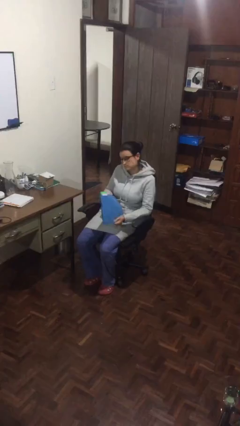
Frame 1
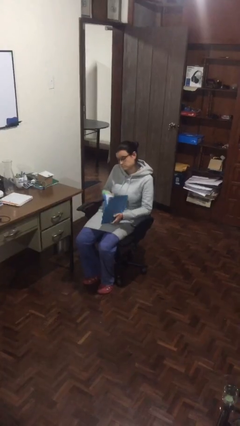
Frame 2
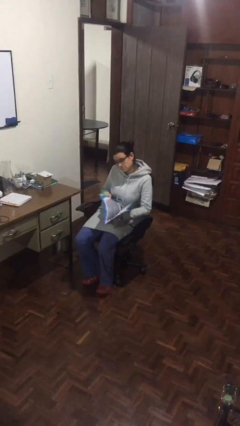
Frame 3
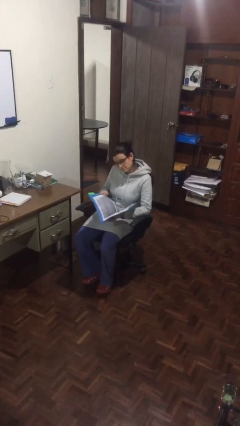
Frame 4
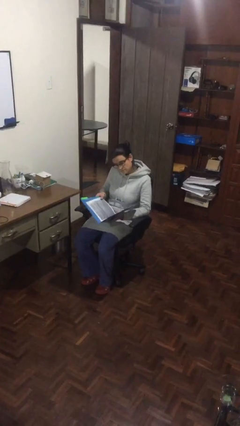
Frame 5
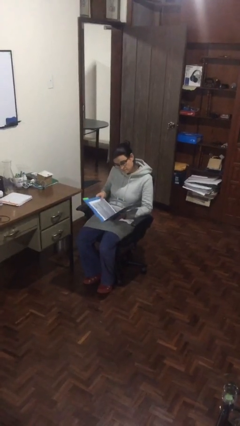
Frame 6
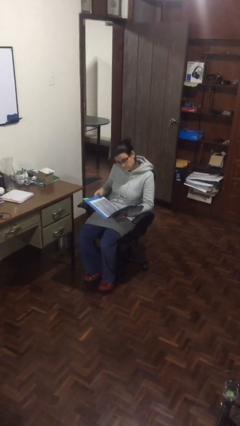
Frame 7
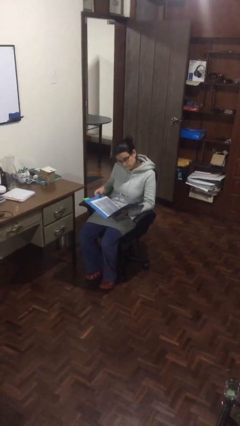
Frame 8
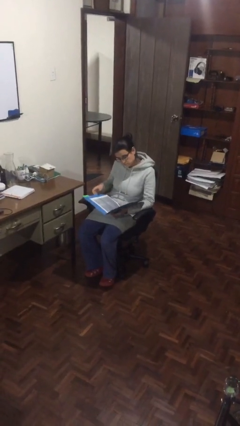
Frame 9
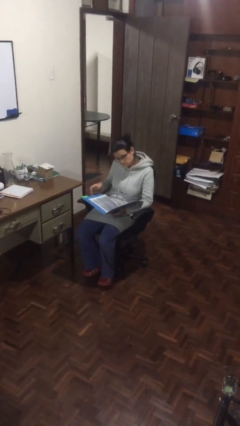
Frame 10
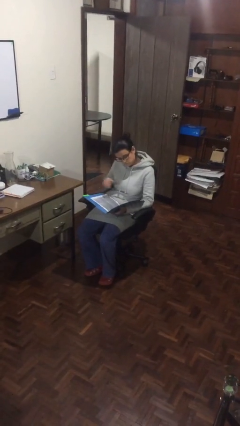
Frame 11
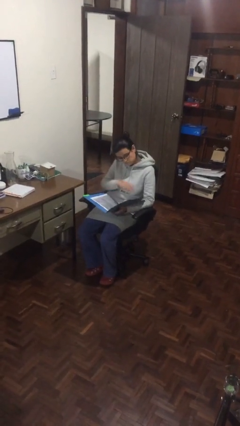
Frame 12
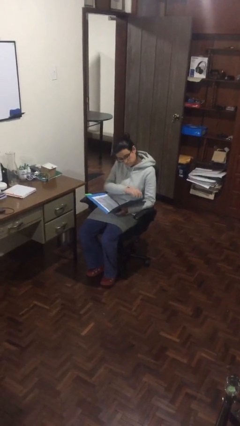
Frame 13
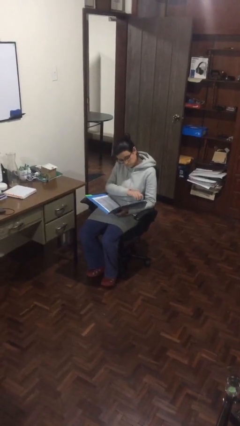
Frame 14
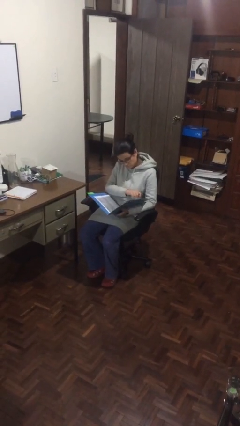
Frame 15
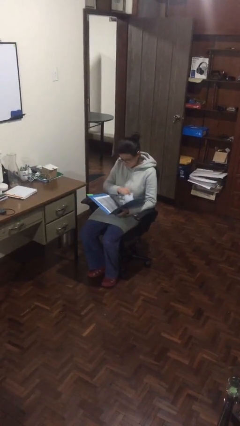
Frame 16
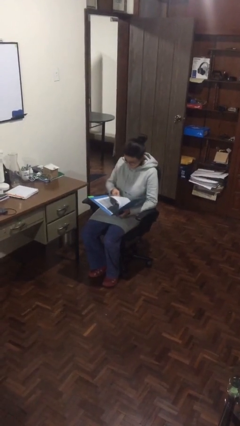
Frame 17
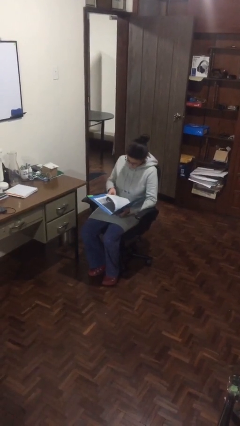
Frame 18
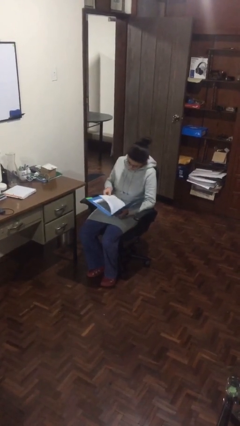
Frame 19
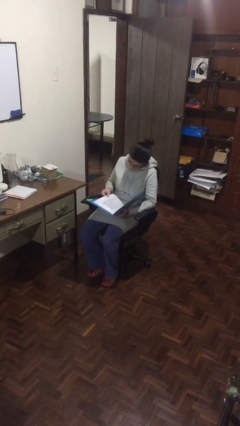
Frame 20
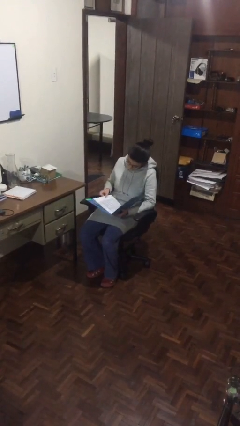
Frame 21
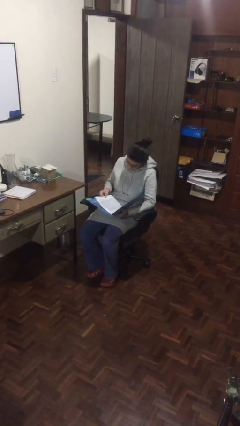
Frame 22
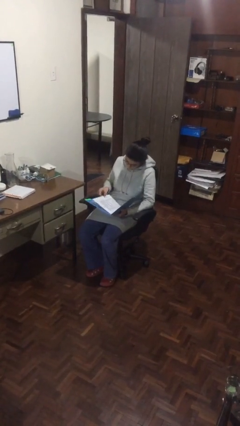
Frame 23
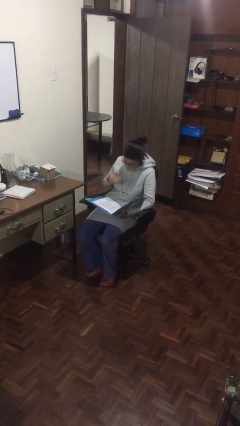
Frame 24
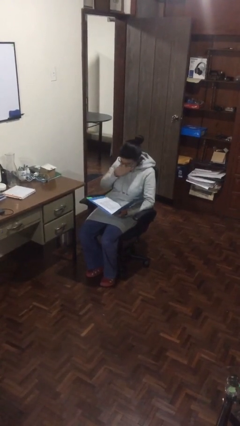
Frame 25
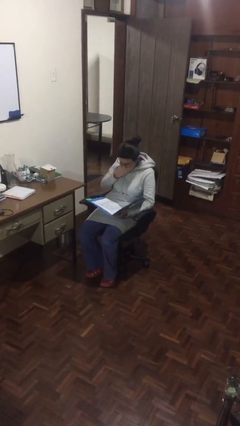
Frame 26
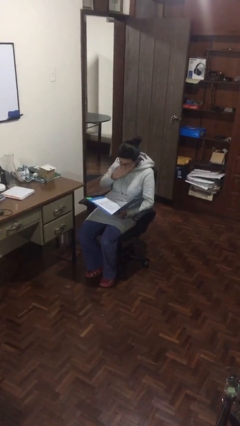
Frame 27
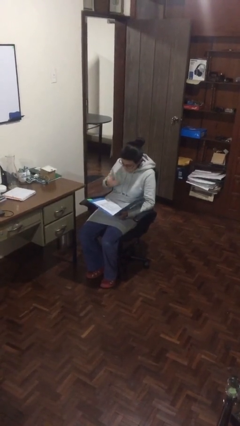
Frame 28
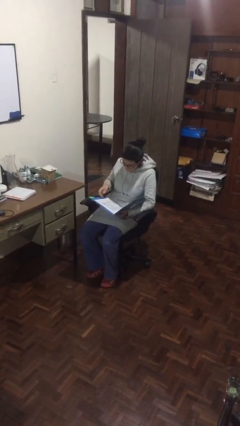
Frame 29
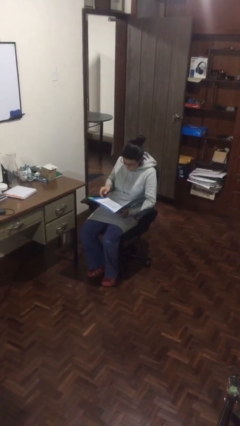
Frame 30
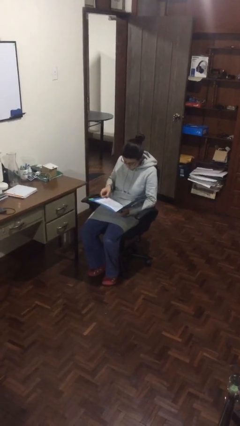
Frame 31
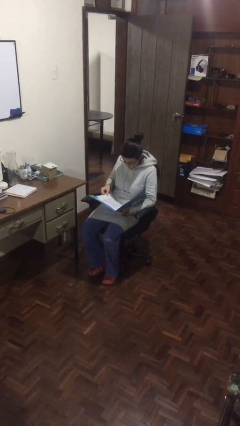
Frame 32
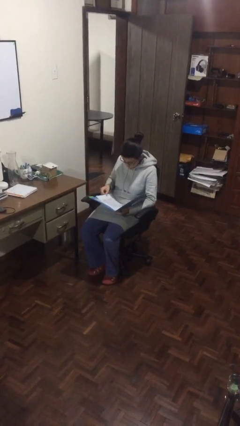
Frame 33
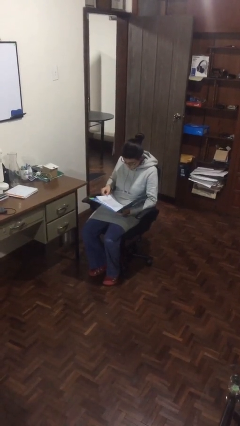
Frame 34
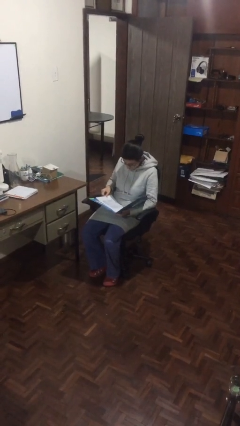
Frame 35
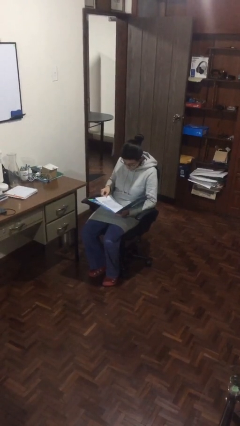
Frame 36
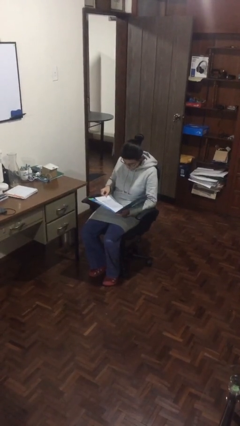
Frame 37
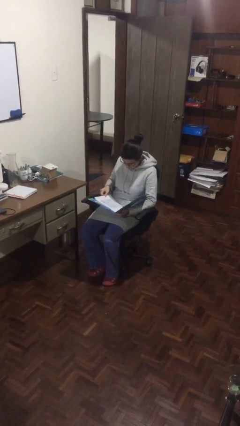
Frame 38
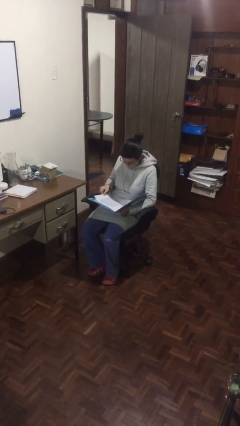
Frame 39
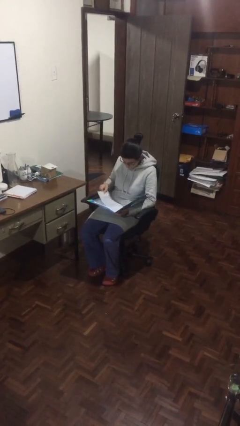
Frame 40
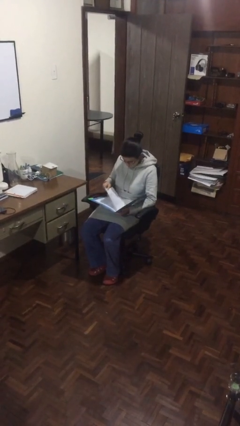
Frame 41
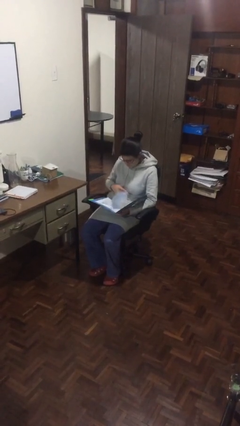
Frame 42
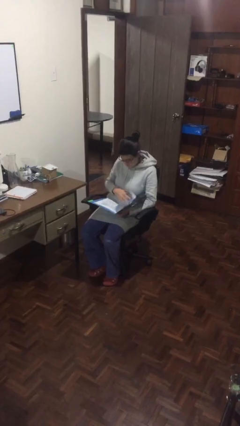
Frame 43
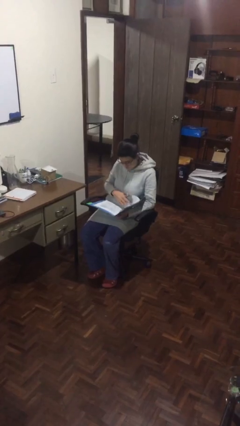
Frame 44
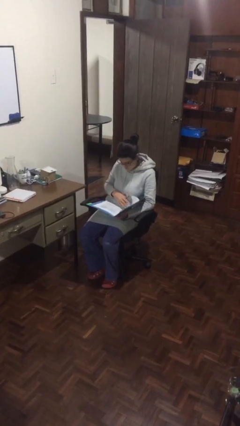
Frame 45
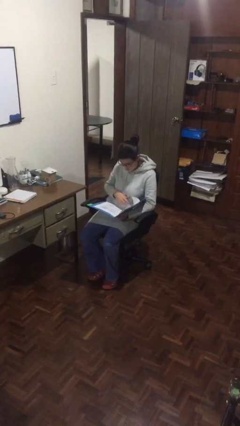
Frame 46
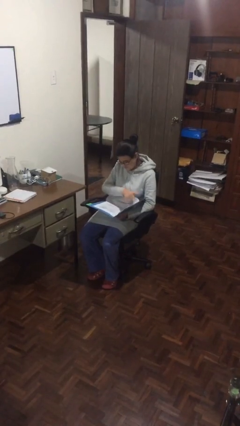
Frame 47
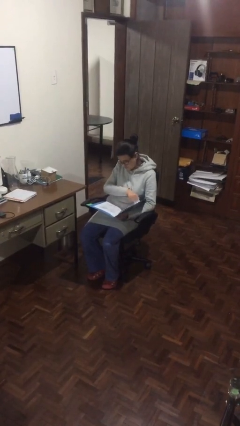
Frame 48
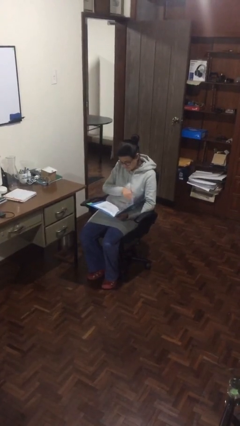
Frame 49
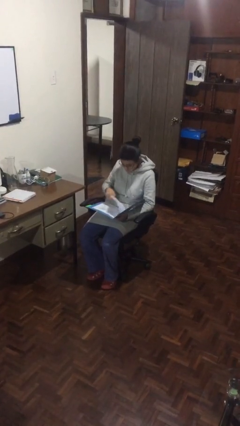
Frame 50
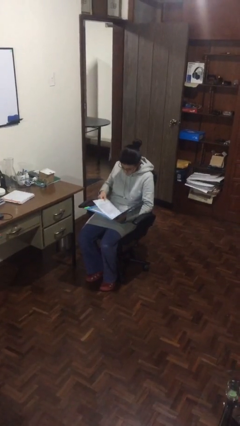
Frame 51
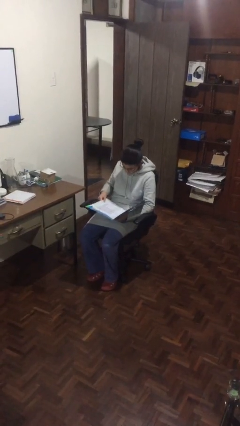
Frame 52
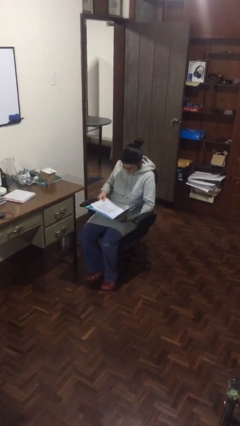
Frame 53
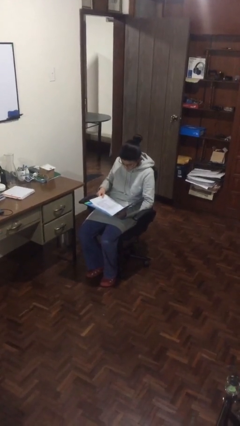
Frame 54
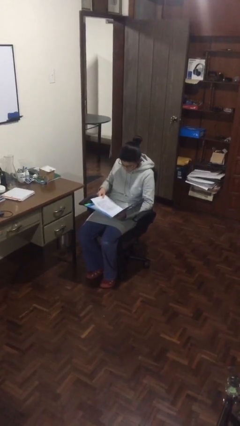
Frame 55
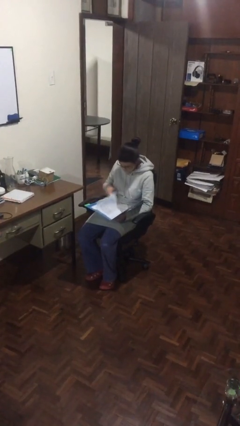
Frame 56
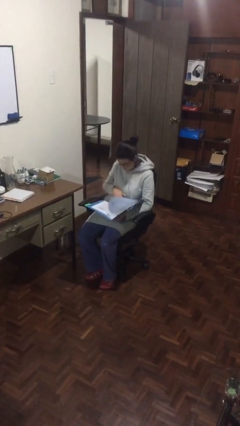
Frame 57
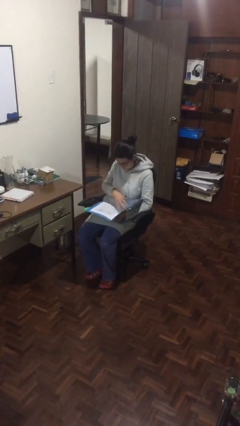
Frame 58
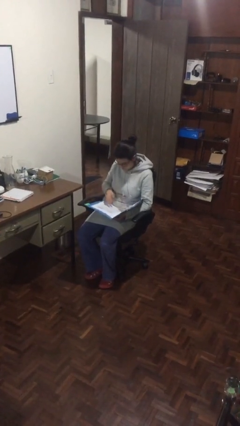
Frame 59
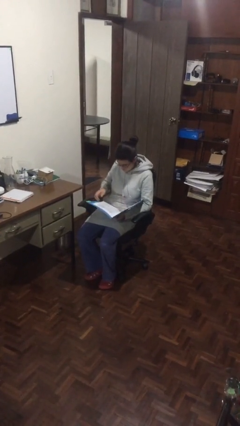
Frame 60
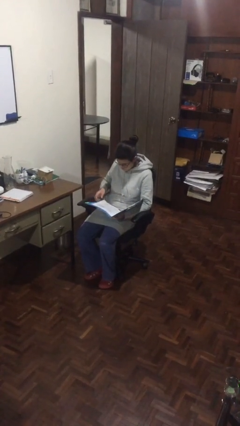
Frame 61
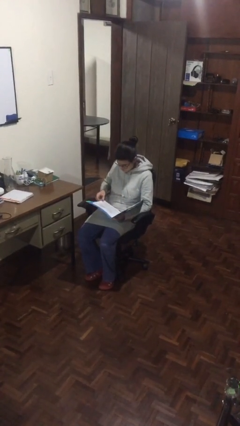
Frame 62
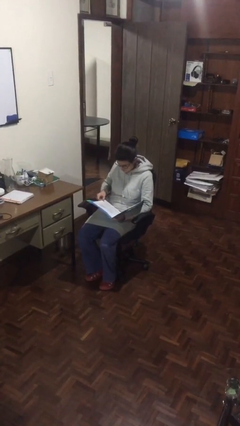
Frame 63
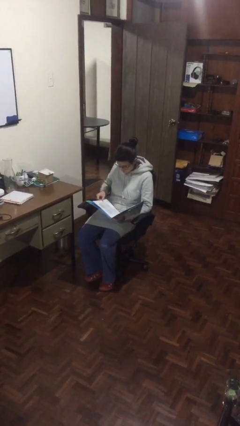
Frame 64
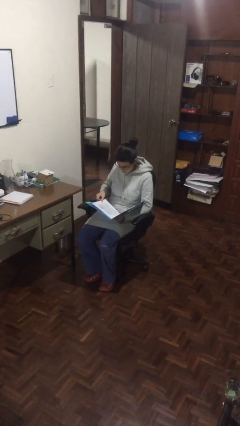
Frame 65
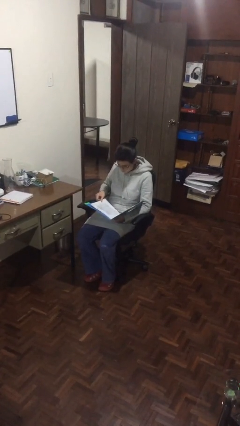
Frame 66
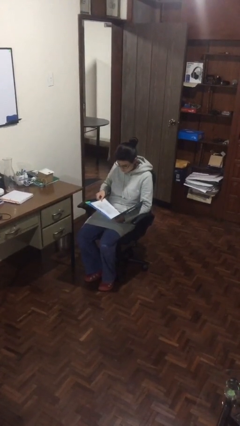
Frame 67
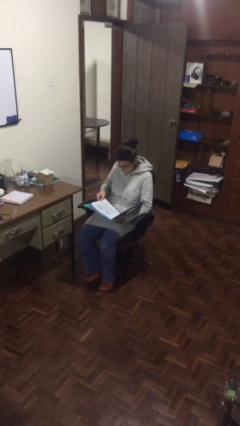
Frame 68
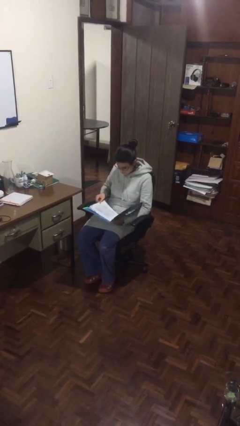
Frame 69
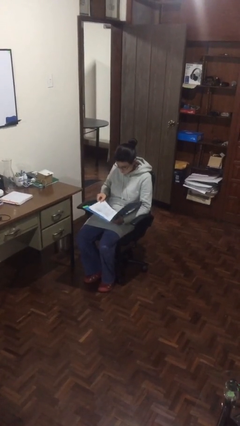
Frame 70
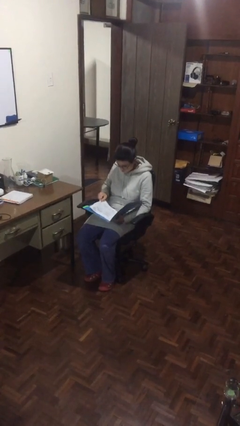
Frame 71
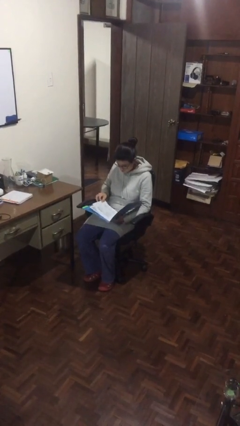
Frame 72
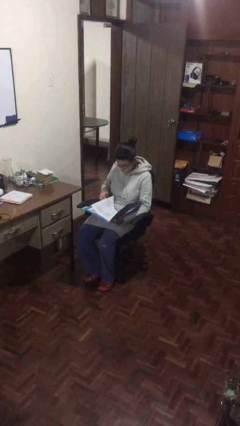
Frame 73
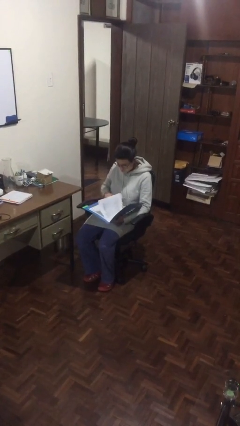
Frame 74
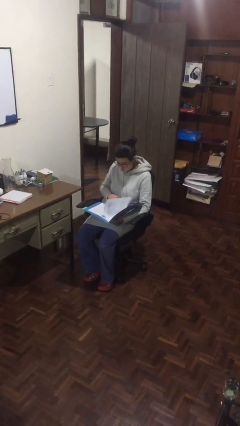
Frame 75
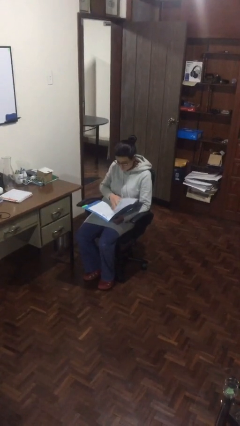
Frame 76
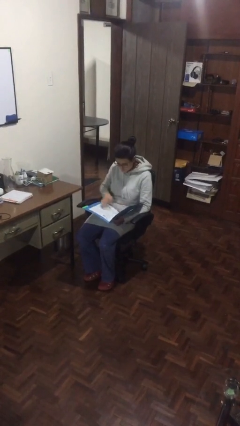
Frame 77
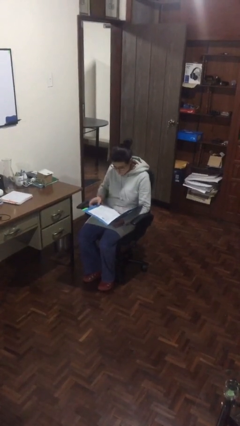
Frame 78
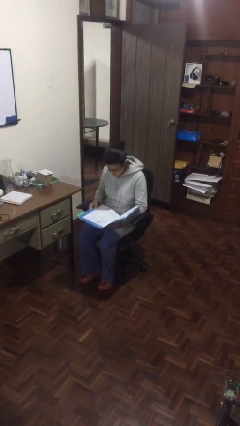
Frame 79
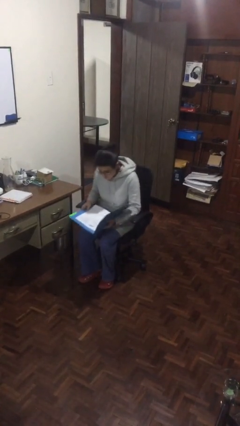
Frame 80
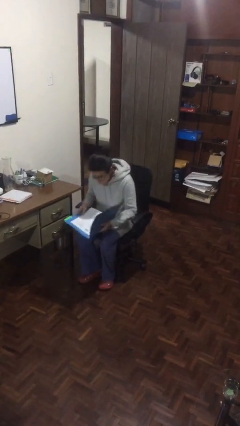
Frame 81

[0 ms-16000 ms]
person reads document

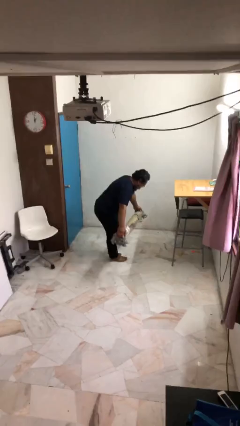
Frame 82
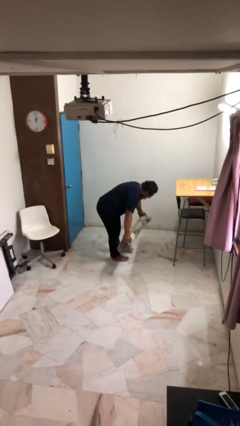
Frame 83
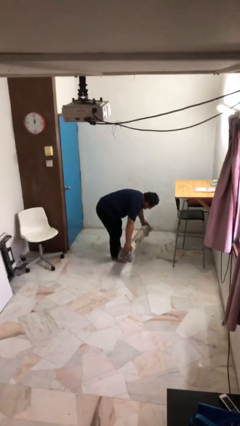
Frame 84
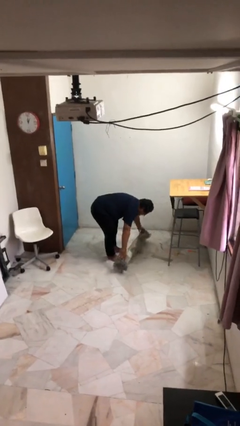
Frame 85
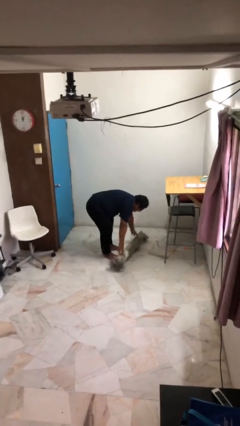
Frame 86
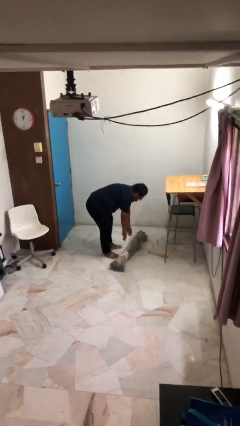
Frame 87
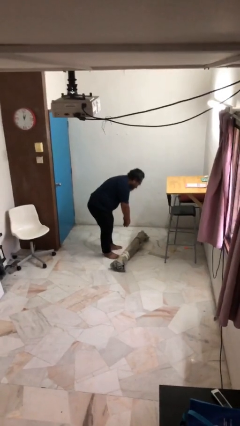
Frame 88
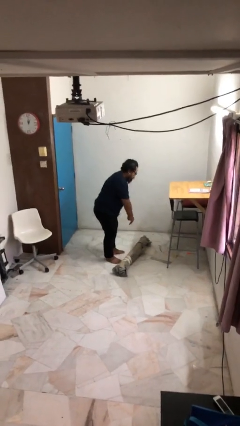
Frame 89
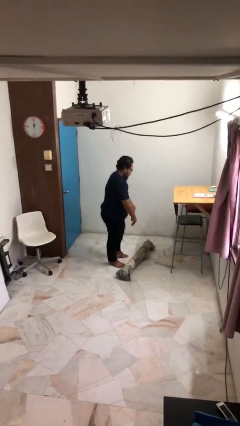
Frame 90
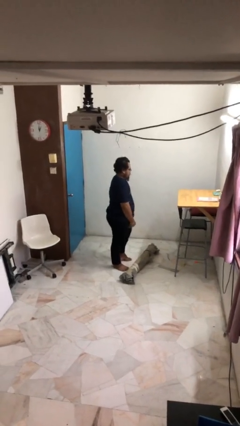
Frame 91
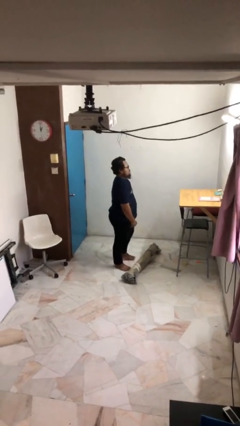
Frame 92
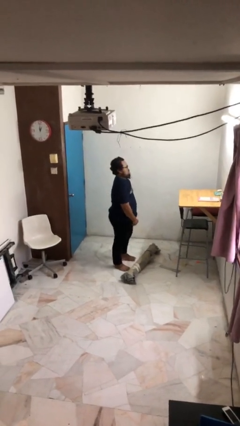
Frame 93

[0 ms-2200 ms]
person puts down object on floor
